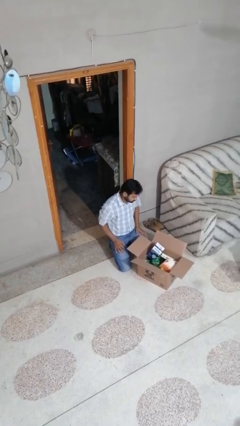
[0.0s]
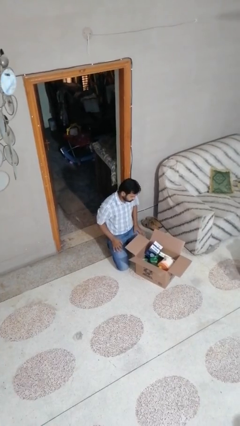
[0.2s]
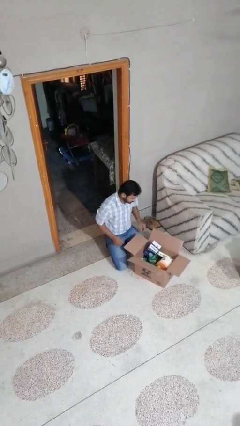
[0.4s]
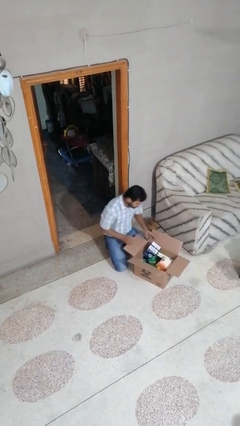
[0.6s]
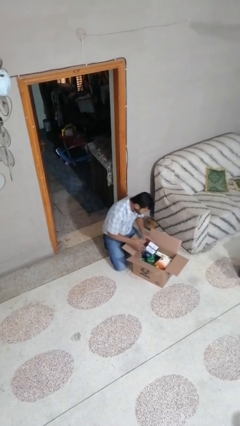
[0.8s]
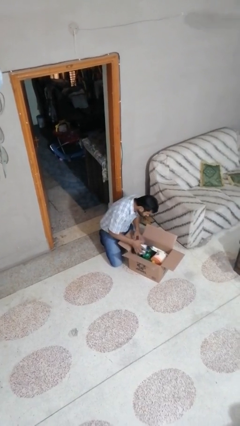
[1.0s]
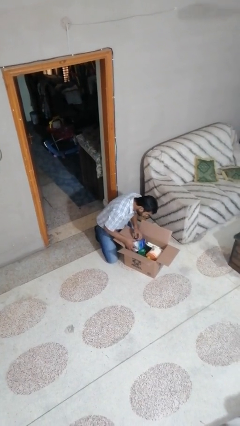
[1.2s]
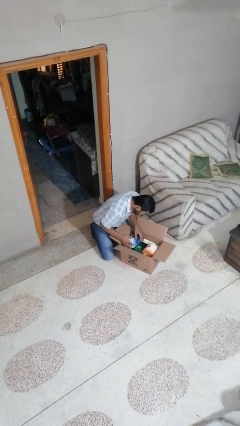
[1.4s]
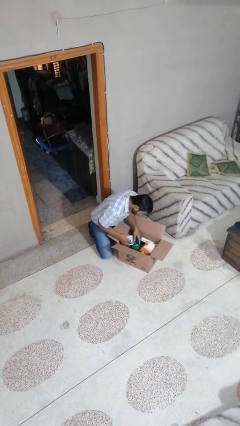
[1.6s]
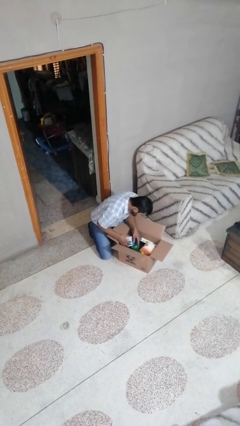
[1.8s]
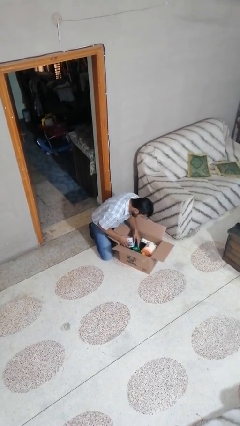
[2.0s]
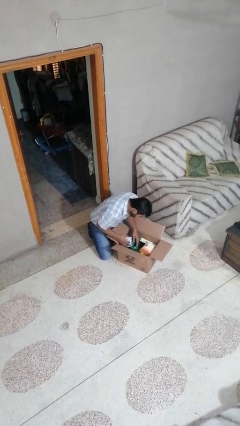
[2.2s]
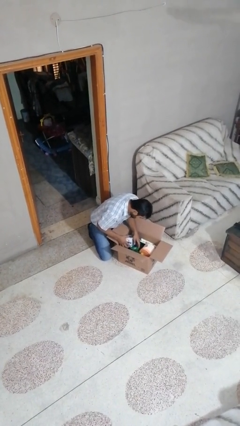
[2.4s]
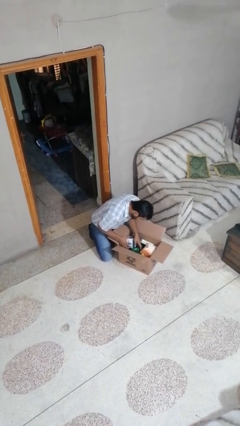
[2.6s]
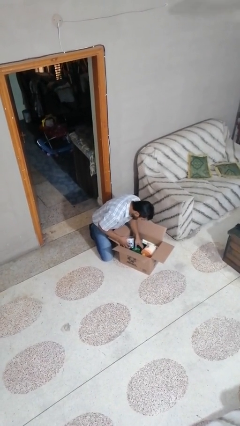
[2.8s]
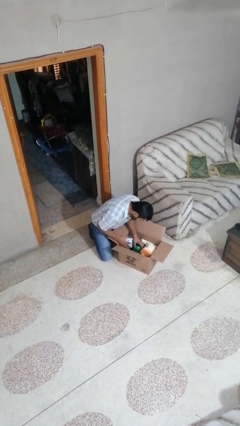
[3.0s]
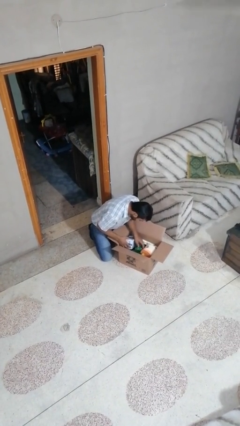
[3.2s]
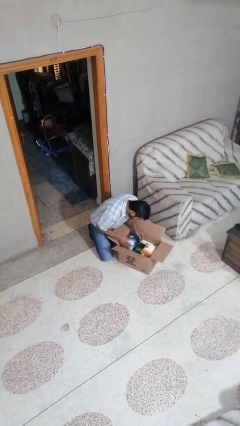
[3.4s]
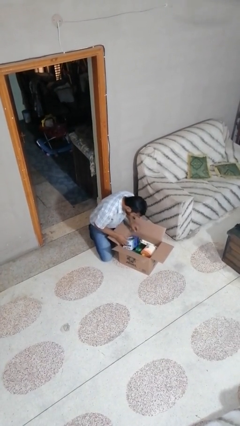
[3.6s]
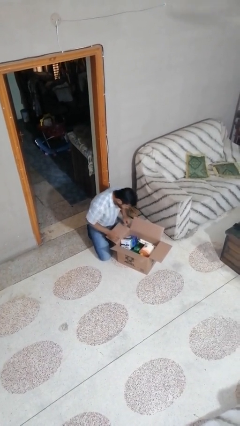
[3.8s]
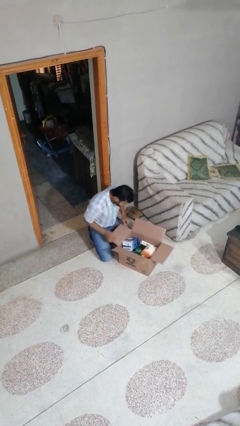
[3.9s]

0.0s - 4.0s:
person searches in box

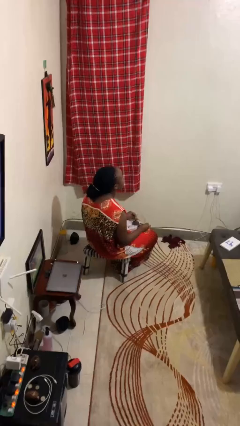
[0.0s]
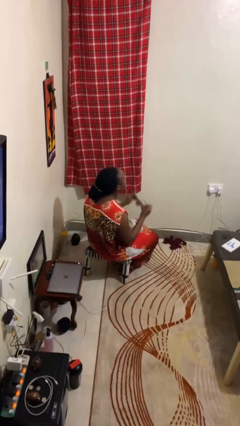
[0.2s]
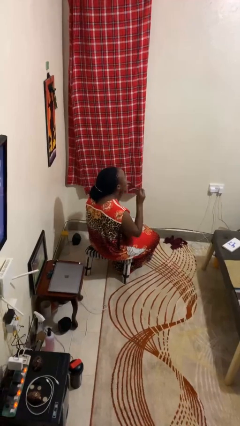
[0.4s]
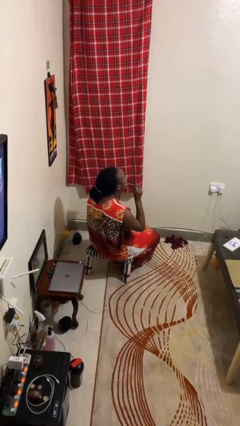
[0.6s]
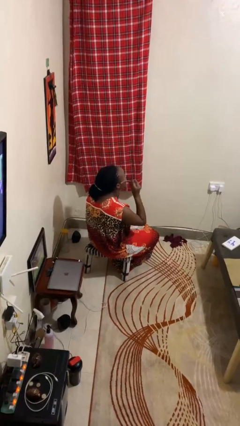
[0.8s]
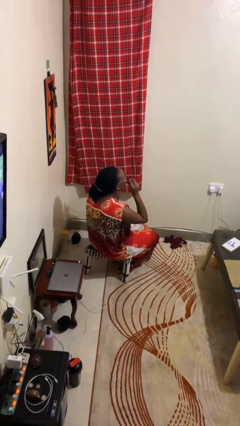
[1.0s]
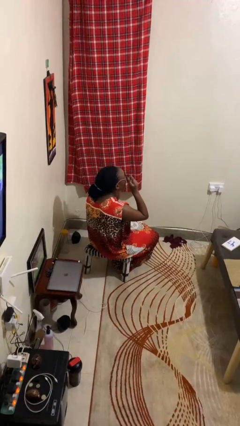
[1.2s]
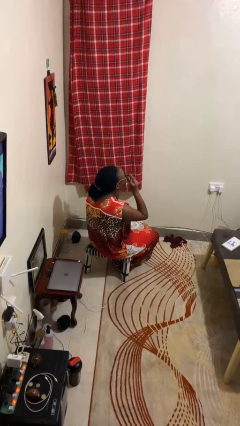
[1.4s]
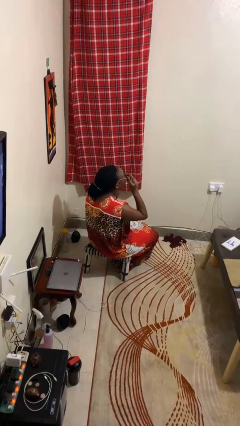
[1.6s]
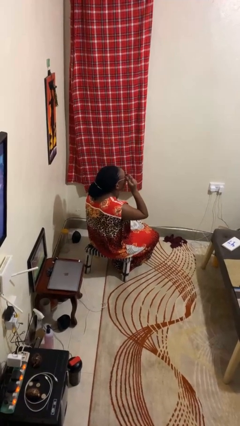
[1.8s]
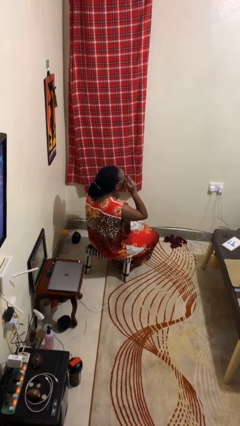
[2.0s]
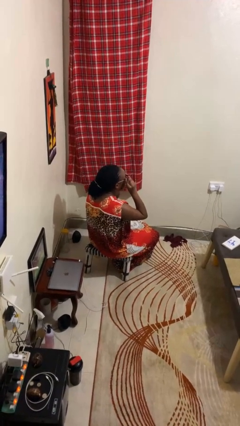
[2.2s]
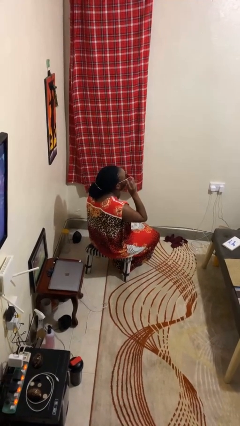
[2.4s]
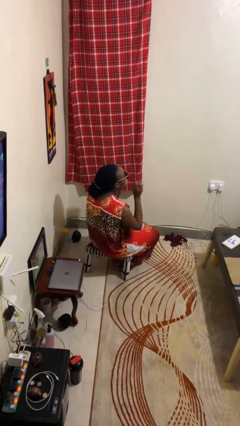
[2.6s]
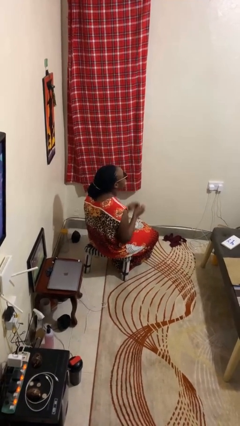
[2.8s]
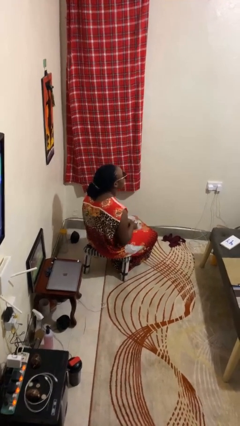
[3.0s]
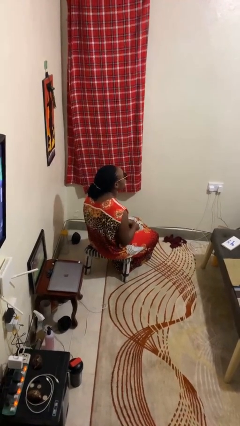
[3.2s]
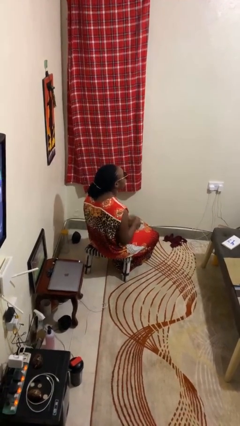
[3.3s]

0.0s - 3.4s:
person puts on sunglasses

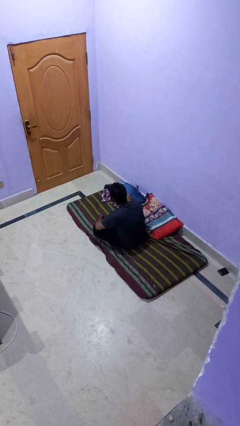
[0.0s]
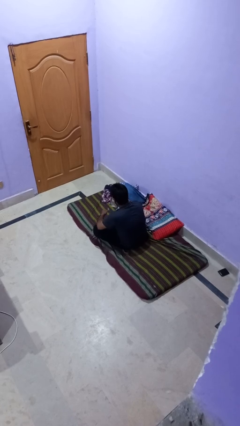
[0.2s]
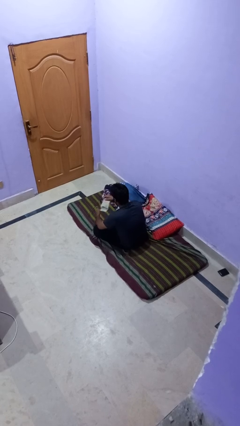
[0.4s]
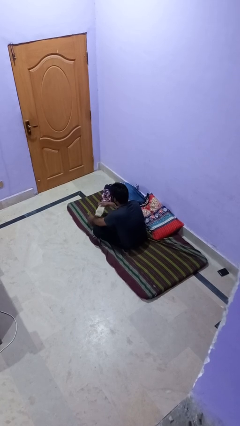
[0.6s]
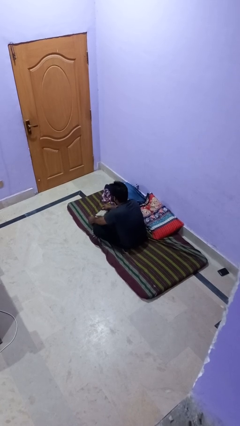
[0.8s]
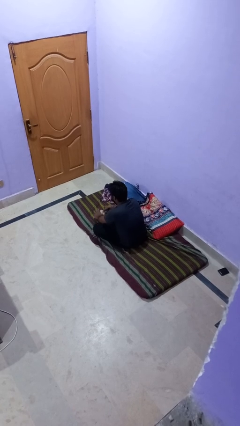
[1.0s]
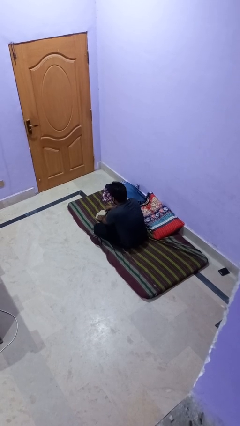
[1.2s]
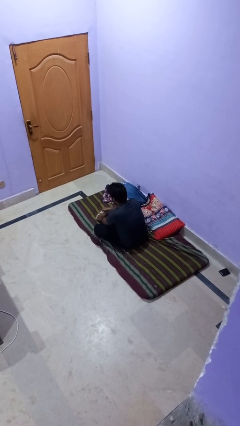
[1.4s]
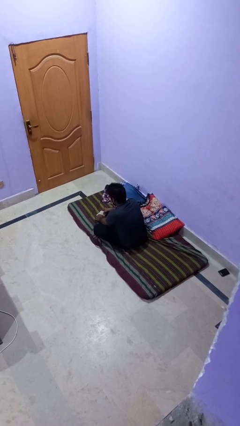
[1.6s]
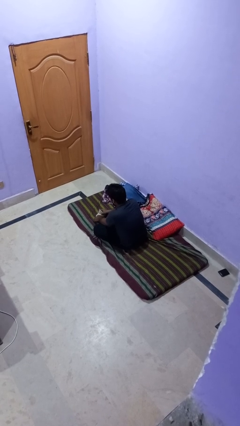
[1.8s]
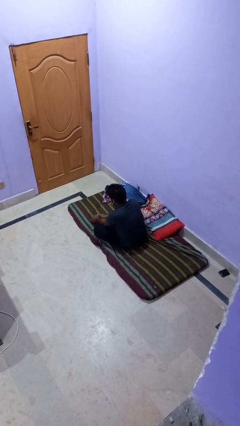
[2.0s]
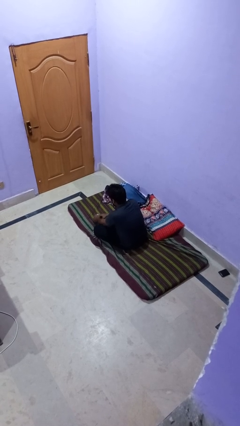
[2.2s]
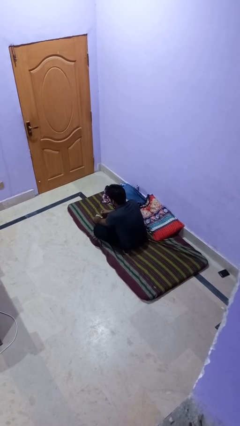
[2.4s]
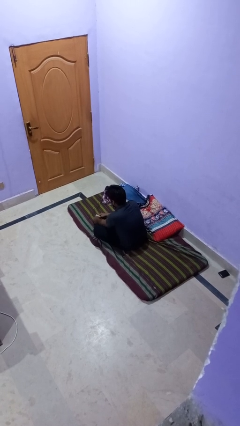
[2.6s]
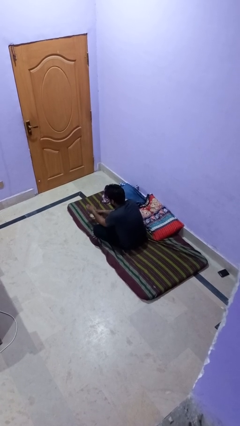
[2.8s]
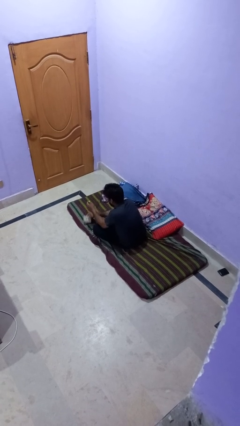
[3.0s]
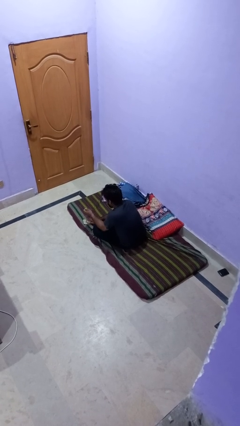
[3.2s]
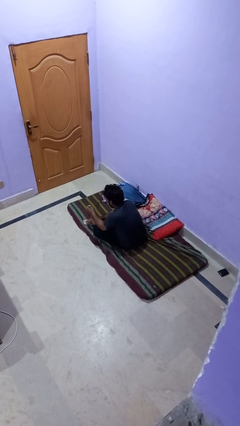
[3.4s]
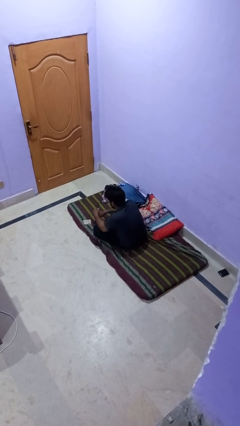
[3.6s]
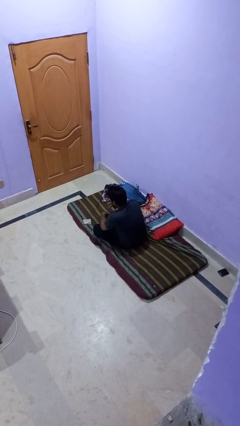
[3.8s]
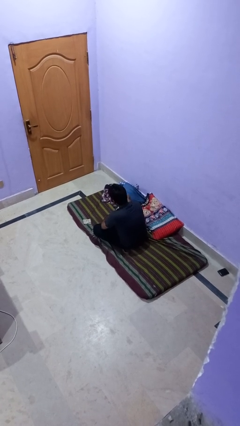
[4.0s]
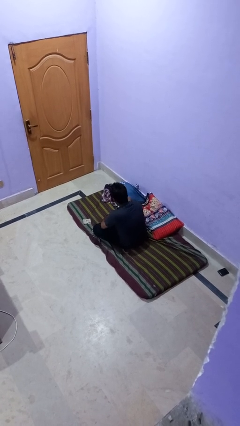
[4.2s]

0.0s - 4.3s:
person folds socks

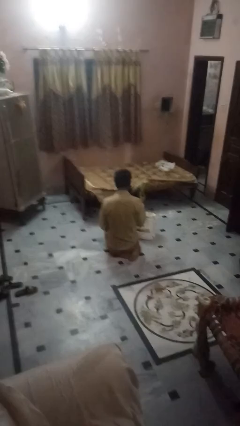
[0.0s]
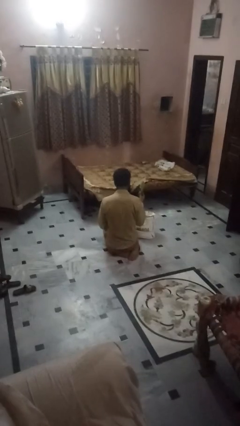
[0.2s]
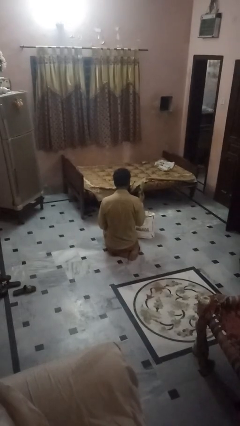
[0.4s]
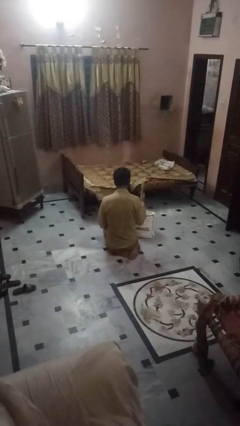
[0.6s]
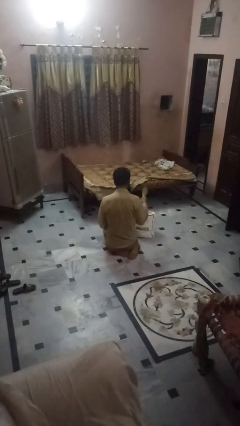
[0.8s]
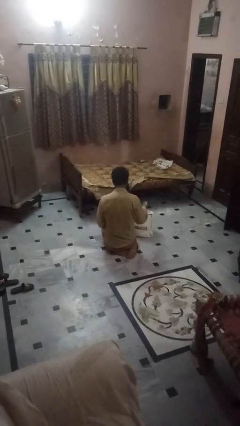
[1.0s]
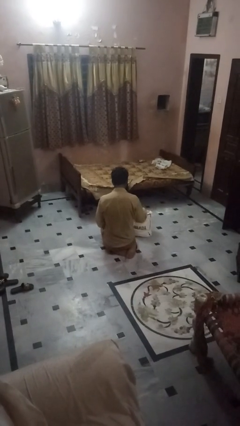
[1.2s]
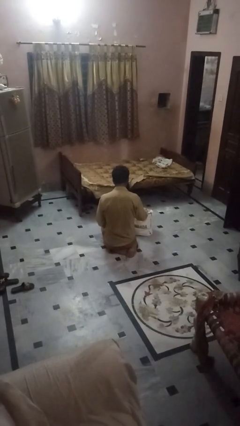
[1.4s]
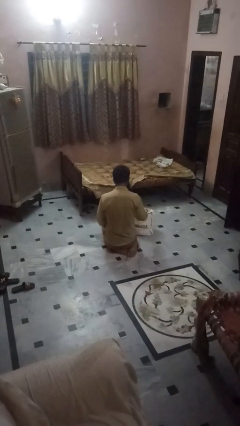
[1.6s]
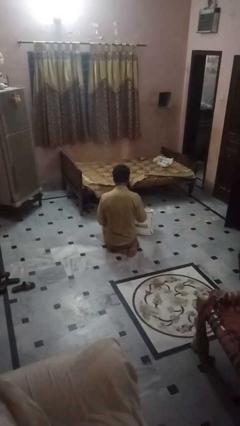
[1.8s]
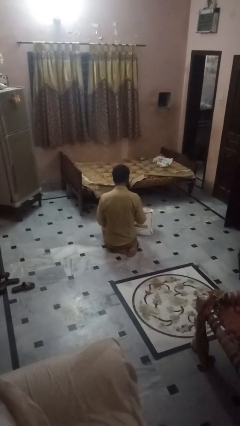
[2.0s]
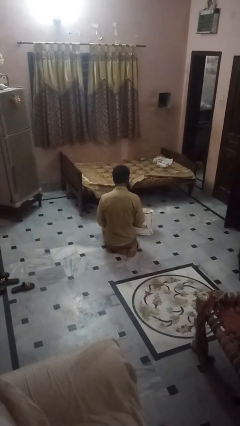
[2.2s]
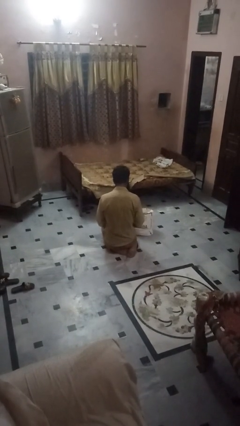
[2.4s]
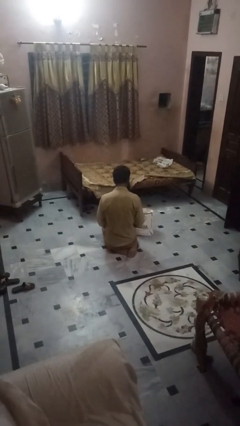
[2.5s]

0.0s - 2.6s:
person puts object into bag

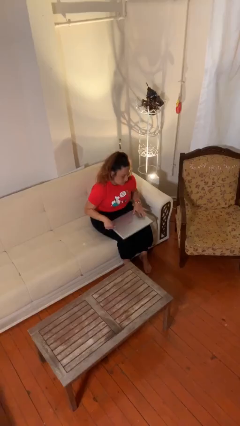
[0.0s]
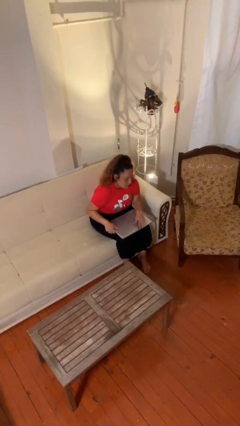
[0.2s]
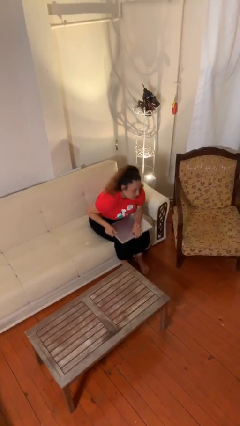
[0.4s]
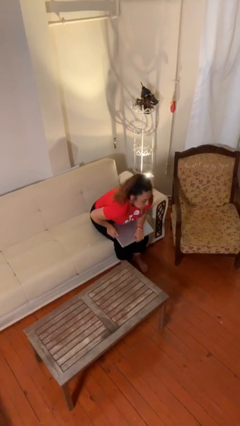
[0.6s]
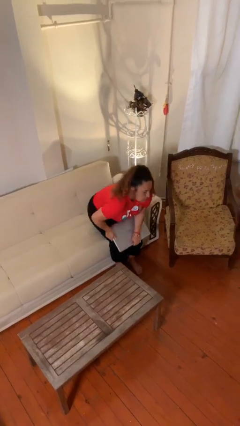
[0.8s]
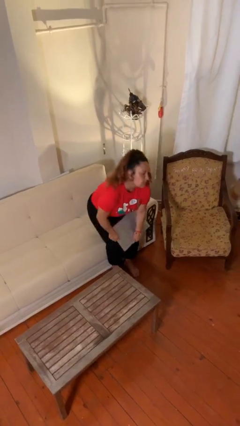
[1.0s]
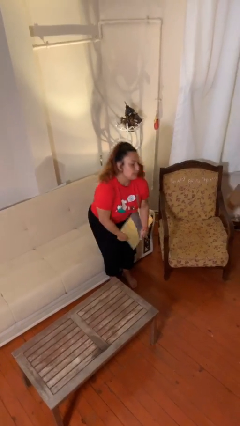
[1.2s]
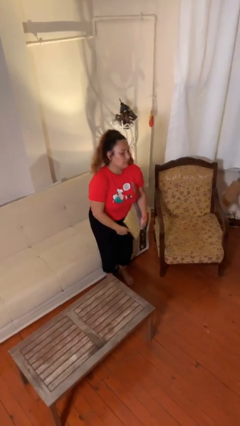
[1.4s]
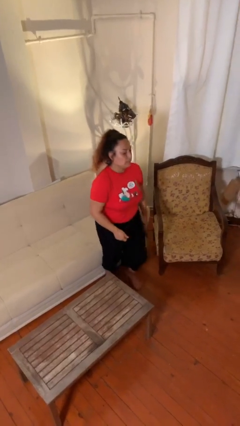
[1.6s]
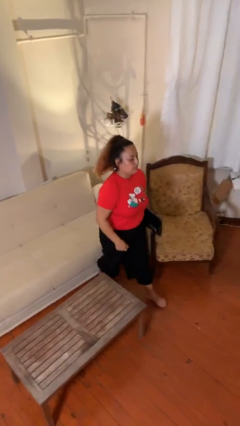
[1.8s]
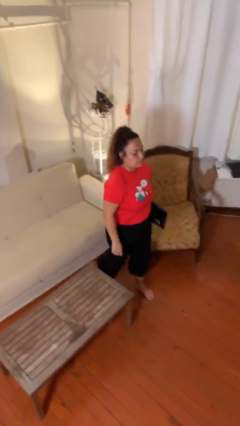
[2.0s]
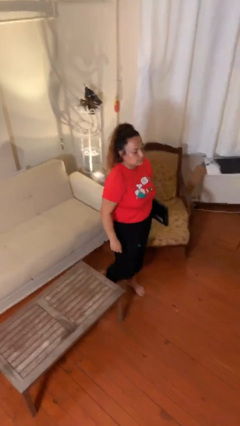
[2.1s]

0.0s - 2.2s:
person stands up

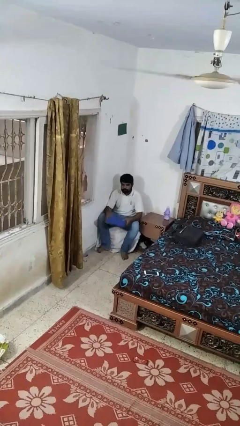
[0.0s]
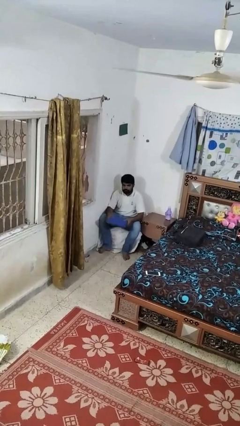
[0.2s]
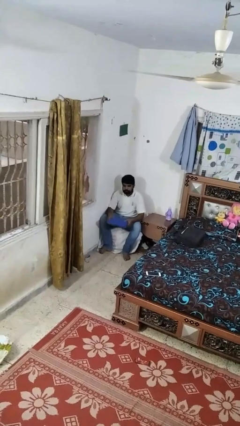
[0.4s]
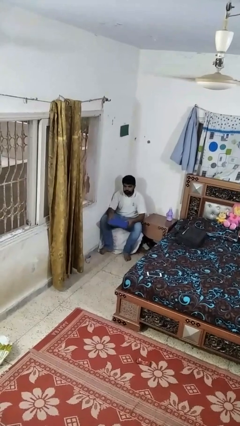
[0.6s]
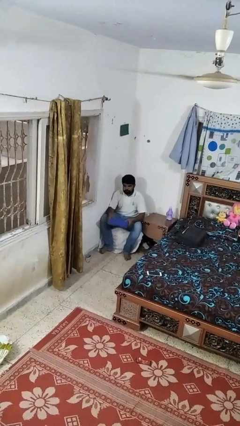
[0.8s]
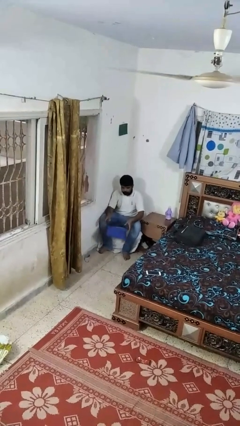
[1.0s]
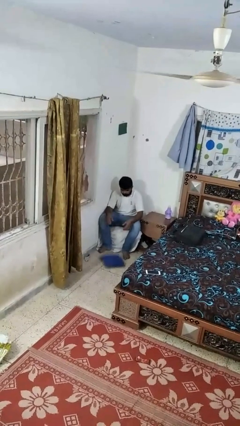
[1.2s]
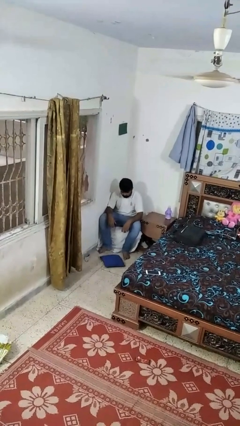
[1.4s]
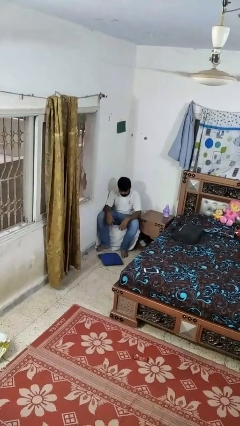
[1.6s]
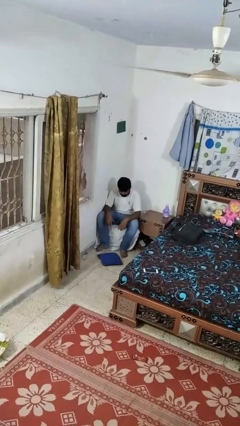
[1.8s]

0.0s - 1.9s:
person drops object
